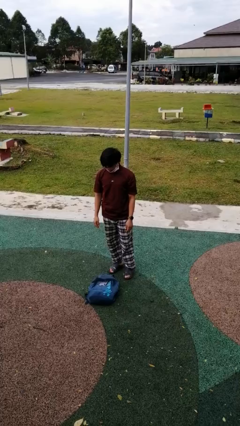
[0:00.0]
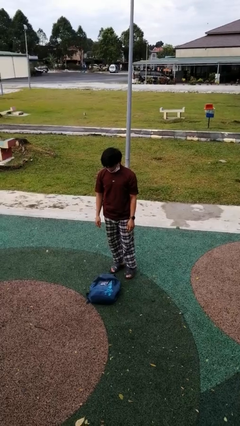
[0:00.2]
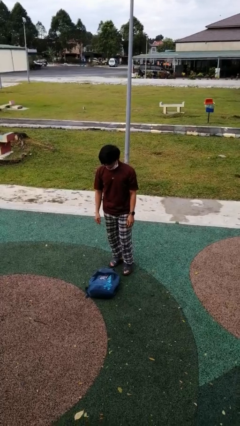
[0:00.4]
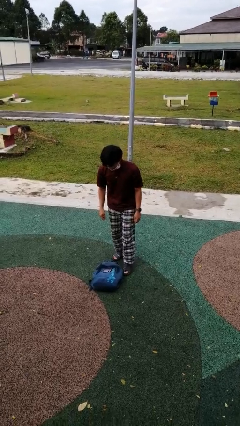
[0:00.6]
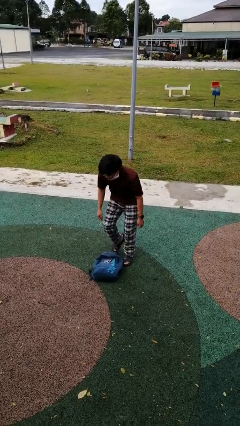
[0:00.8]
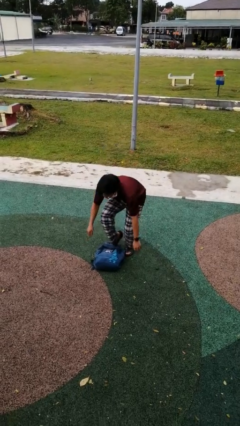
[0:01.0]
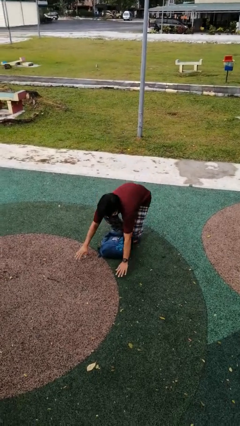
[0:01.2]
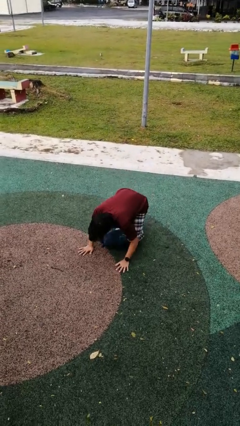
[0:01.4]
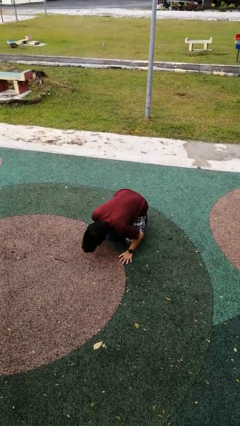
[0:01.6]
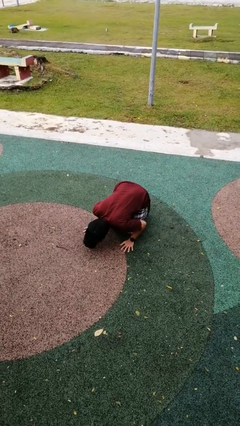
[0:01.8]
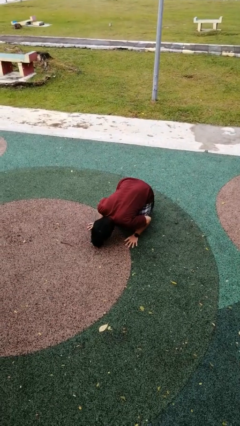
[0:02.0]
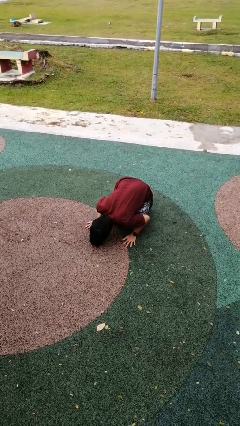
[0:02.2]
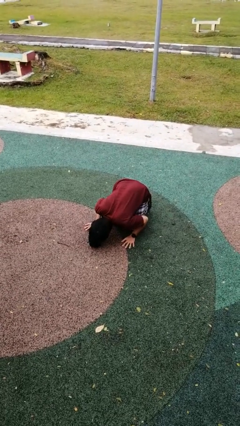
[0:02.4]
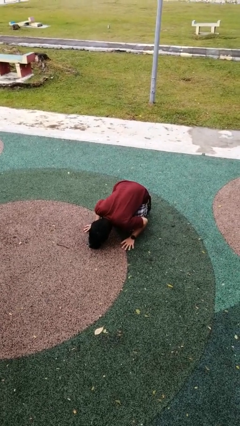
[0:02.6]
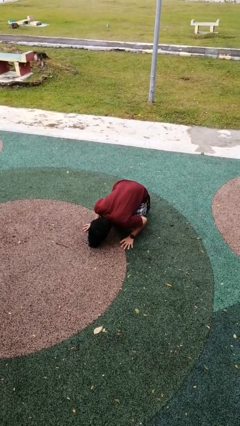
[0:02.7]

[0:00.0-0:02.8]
person trips on object on floor

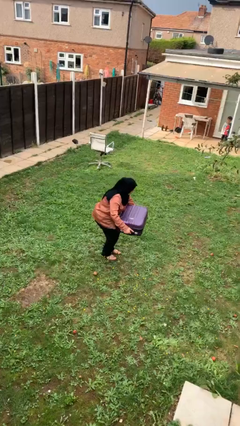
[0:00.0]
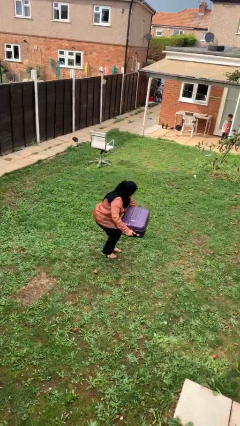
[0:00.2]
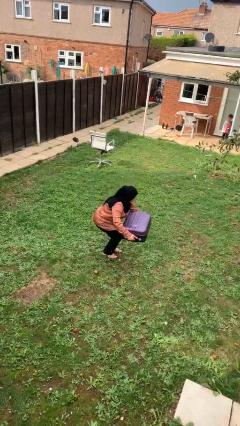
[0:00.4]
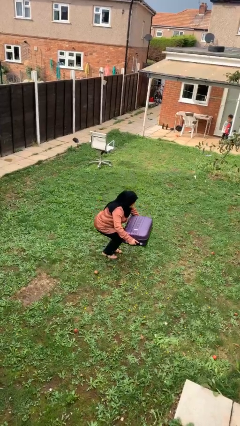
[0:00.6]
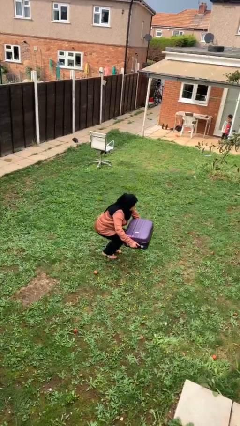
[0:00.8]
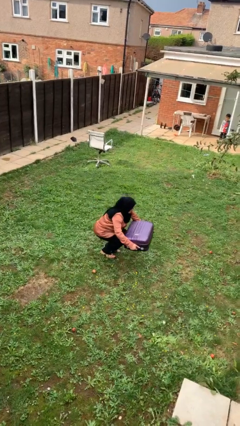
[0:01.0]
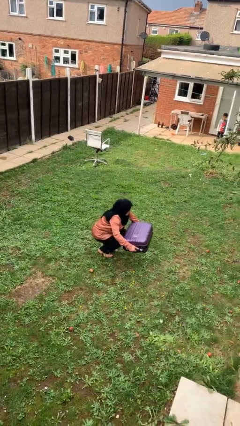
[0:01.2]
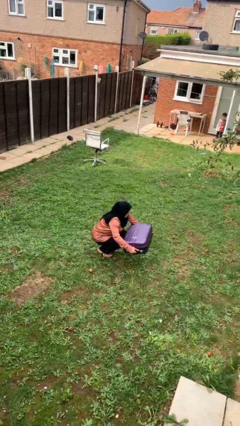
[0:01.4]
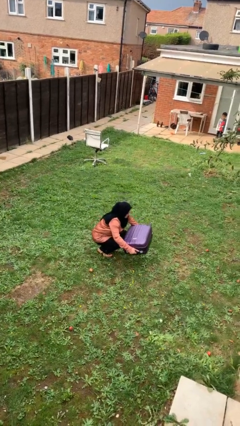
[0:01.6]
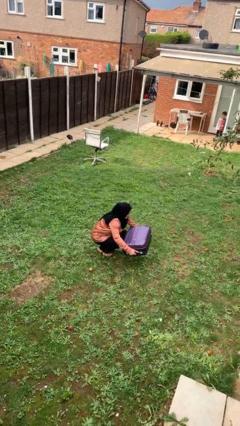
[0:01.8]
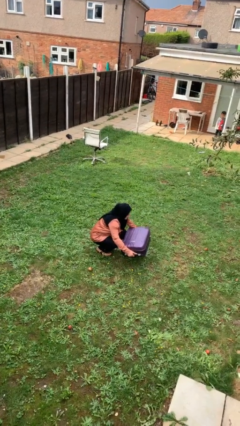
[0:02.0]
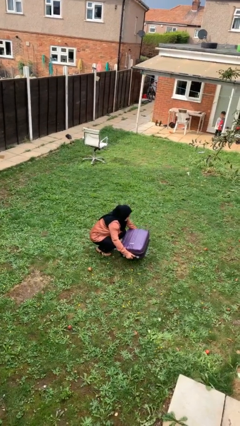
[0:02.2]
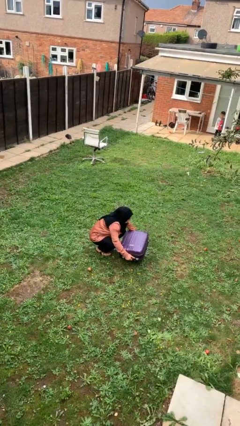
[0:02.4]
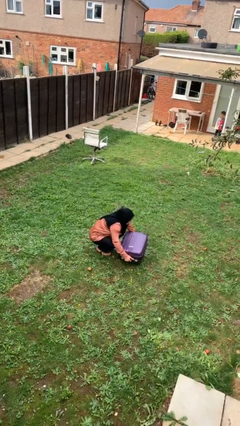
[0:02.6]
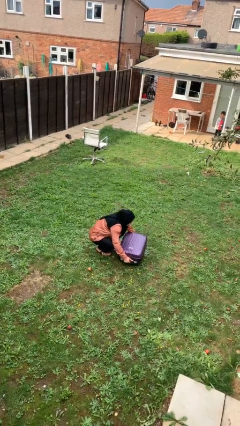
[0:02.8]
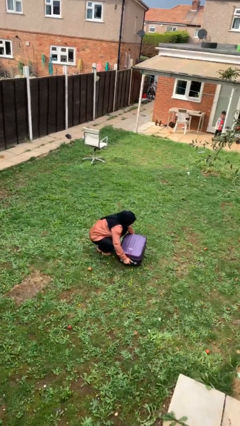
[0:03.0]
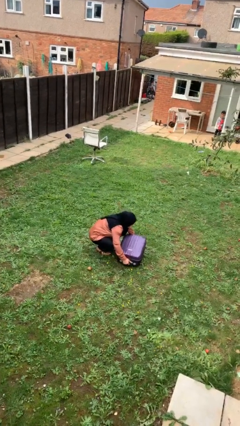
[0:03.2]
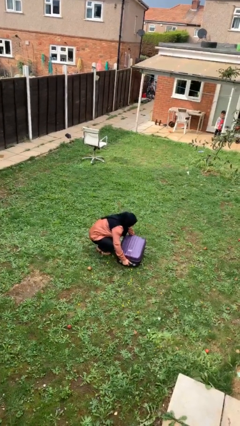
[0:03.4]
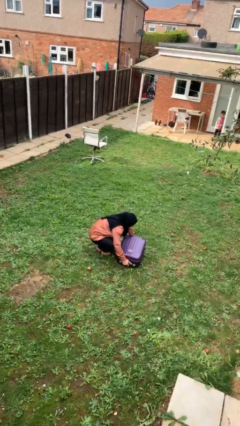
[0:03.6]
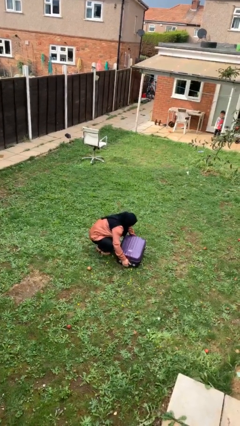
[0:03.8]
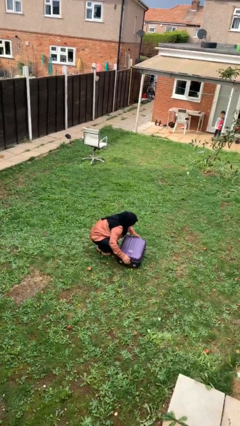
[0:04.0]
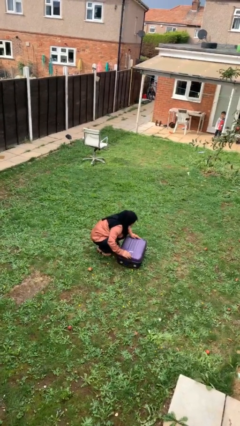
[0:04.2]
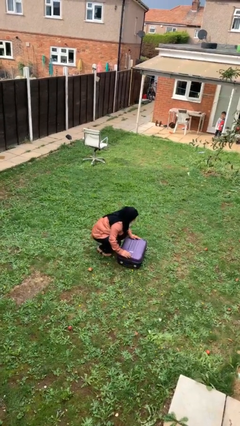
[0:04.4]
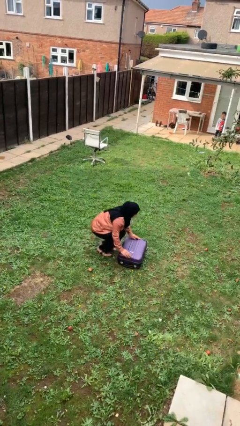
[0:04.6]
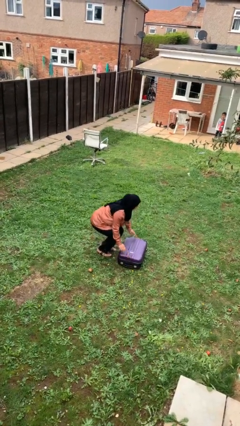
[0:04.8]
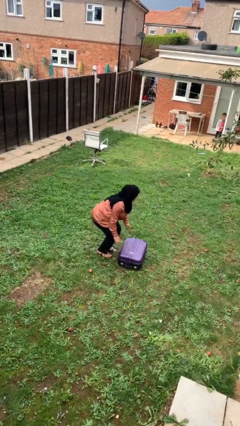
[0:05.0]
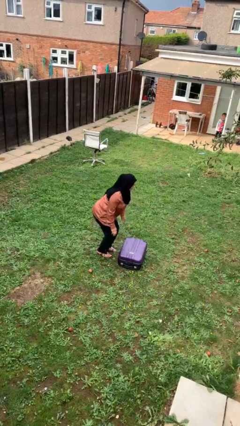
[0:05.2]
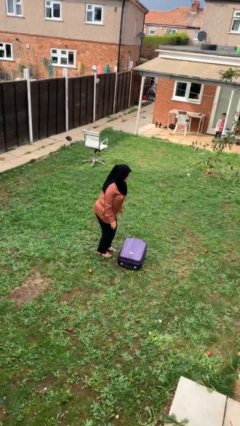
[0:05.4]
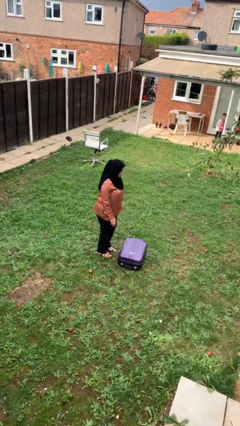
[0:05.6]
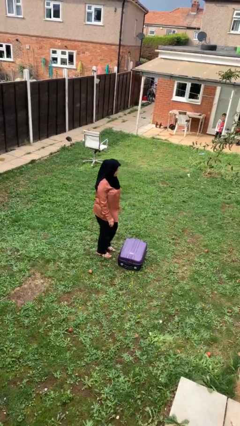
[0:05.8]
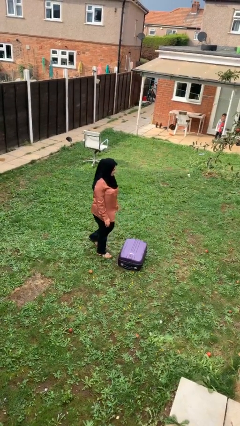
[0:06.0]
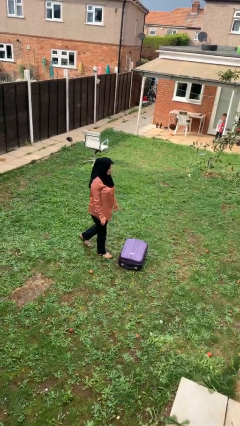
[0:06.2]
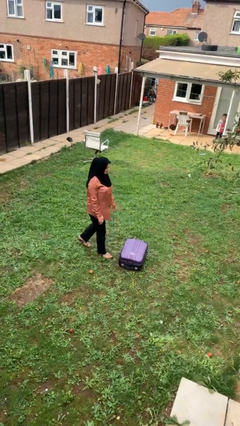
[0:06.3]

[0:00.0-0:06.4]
person puts down object on floor

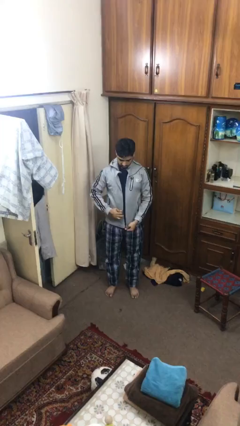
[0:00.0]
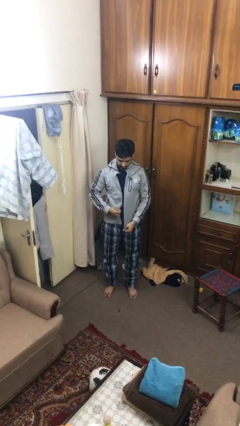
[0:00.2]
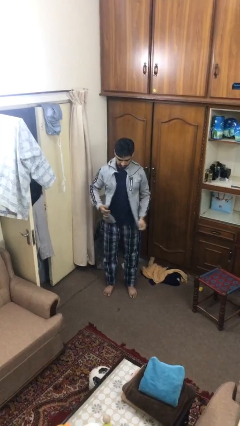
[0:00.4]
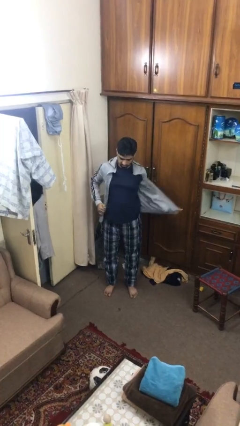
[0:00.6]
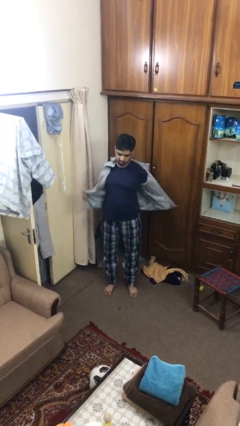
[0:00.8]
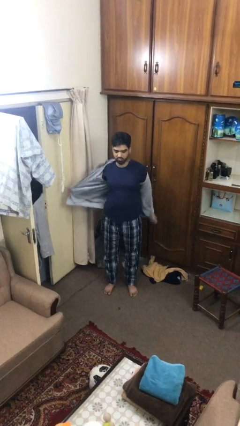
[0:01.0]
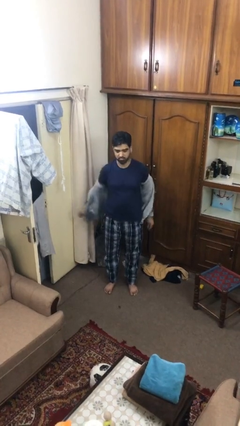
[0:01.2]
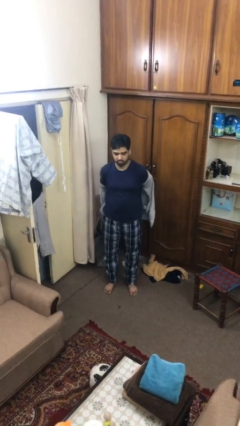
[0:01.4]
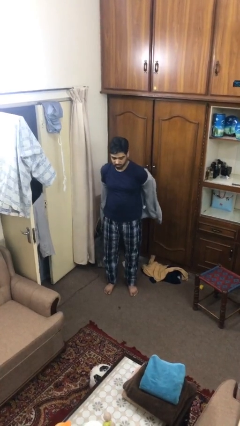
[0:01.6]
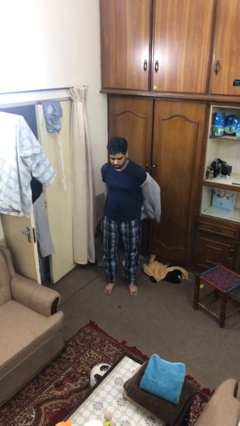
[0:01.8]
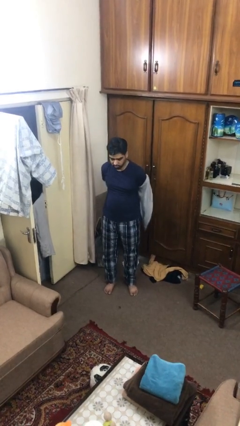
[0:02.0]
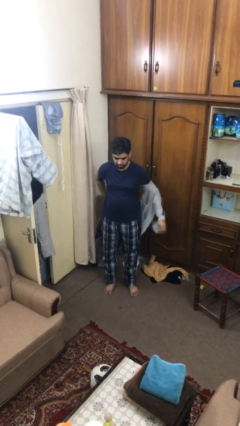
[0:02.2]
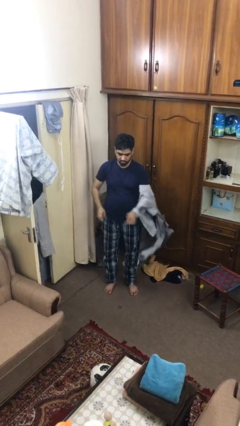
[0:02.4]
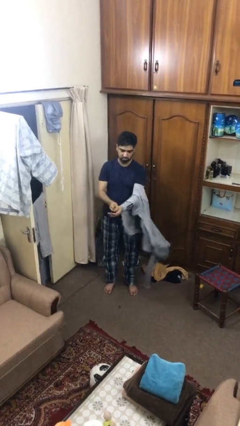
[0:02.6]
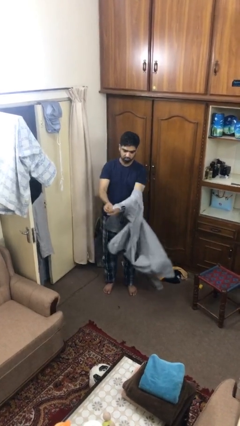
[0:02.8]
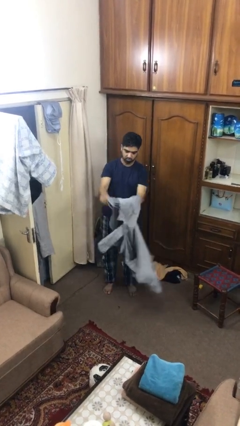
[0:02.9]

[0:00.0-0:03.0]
person takes off jacket

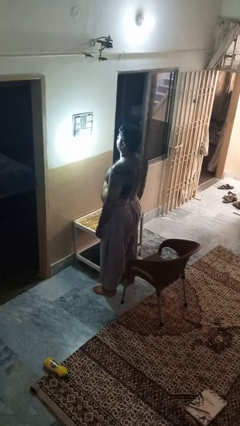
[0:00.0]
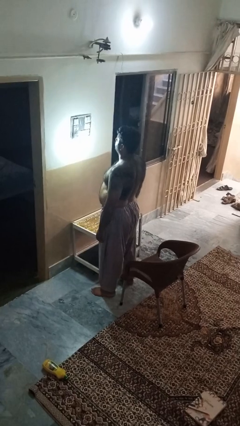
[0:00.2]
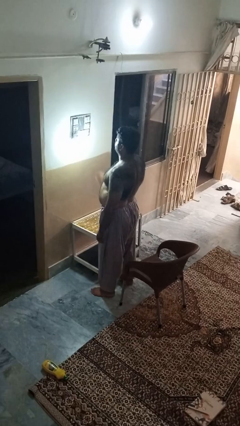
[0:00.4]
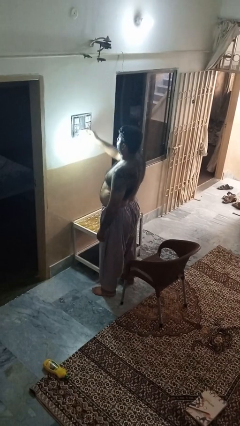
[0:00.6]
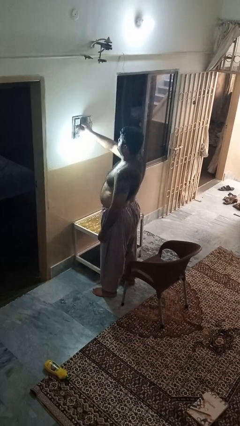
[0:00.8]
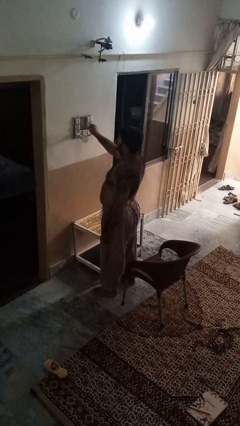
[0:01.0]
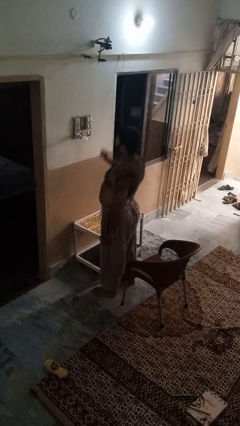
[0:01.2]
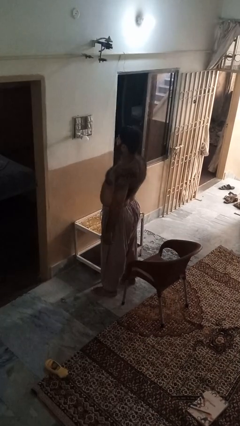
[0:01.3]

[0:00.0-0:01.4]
person turns off lamp

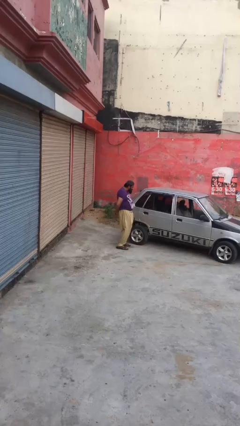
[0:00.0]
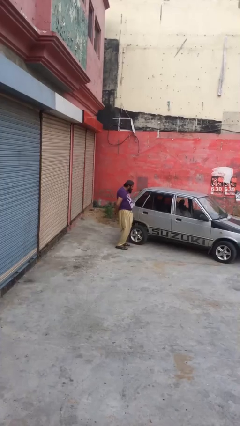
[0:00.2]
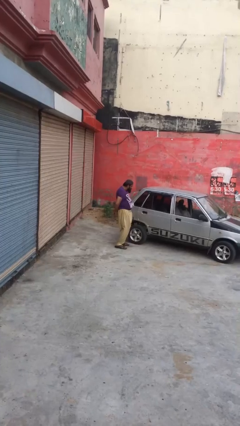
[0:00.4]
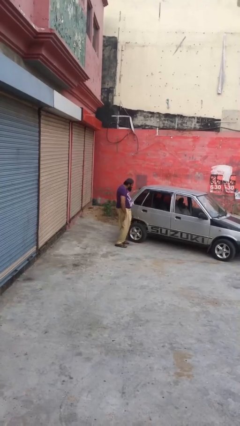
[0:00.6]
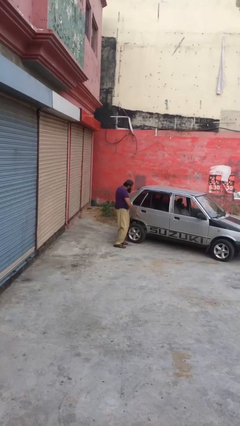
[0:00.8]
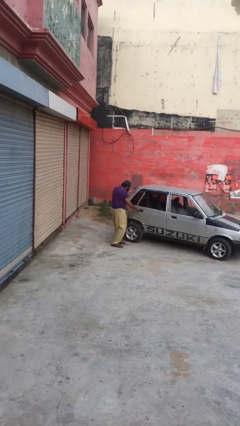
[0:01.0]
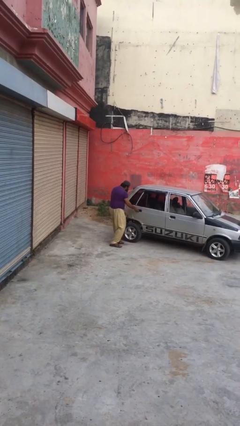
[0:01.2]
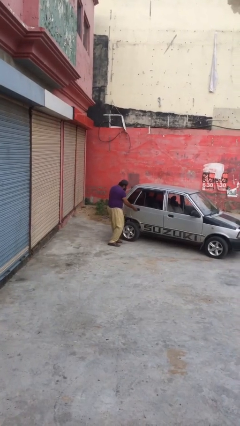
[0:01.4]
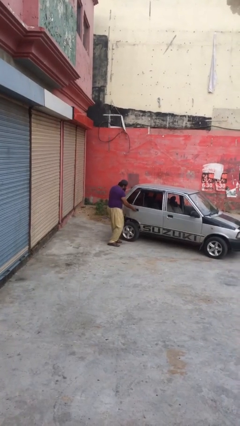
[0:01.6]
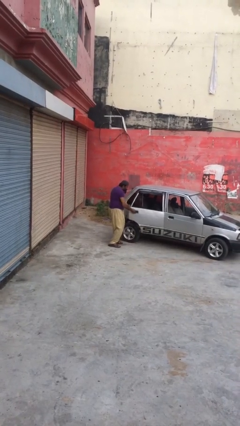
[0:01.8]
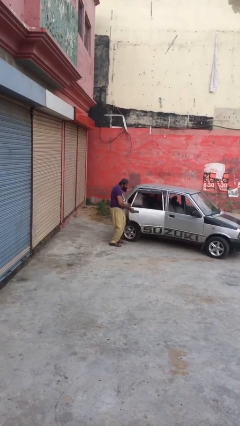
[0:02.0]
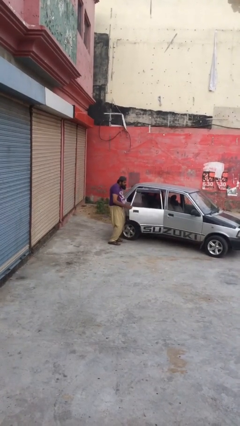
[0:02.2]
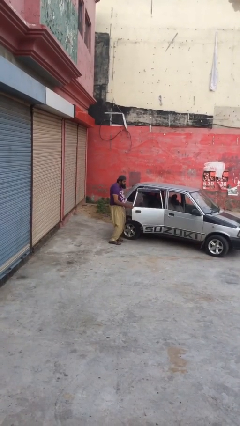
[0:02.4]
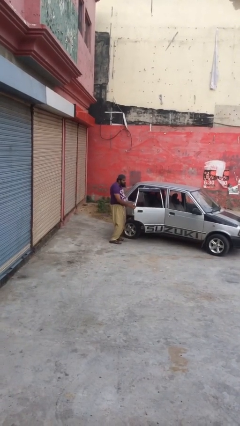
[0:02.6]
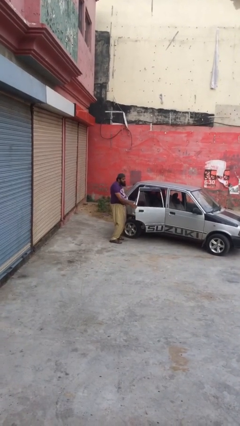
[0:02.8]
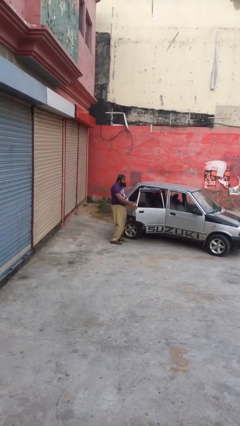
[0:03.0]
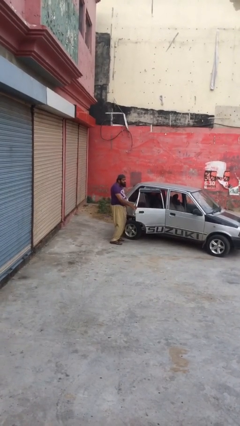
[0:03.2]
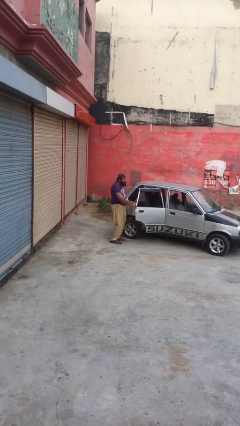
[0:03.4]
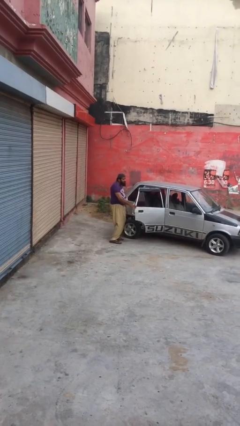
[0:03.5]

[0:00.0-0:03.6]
person opens car door

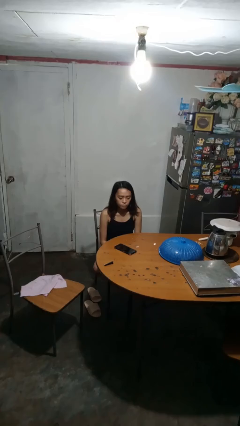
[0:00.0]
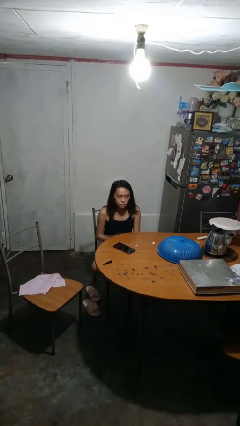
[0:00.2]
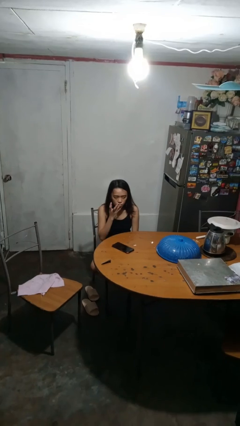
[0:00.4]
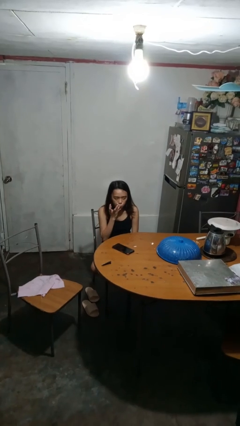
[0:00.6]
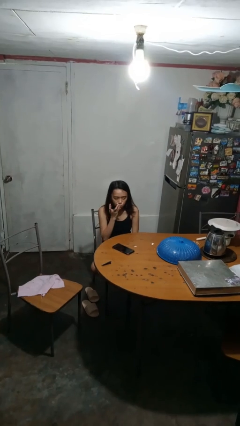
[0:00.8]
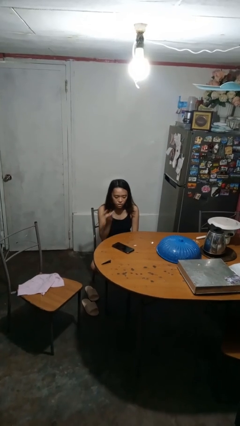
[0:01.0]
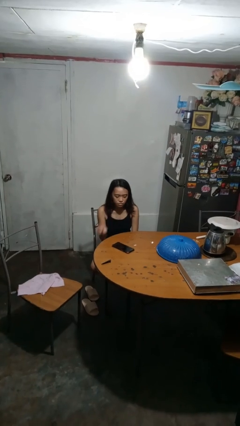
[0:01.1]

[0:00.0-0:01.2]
person licks fingers
